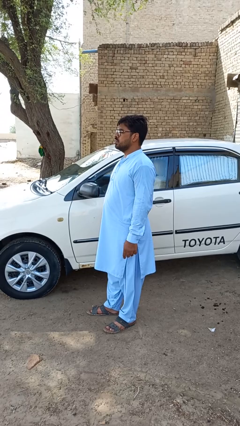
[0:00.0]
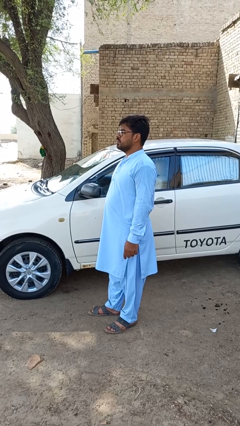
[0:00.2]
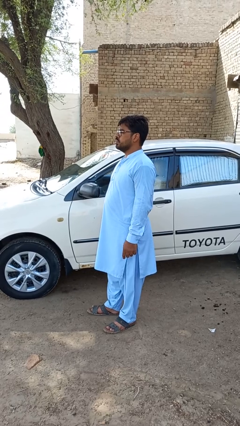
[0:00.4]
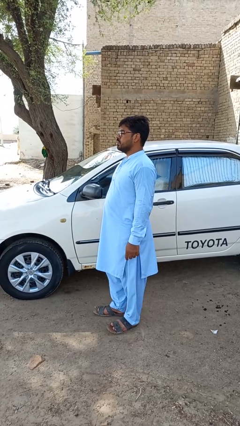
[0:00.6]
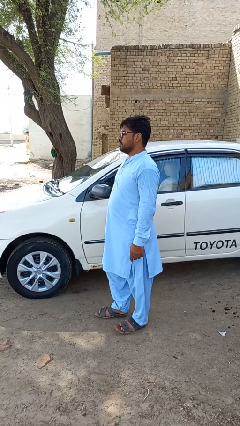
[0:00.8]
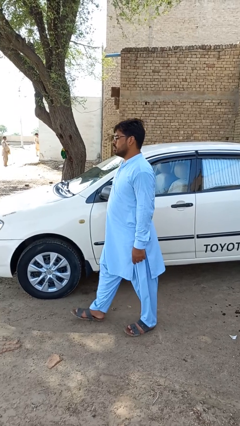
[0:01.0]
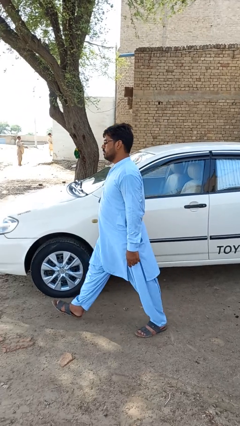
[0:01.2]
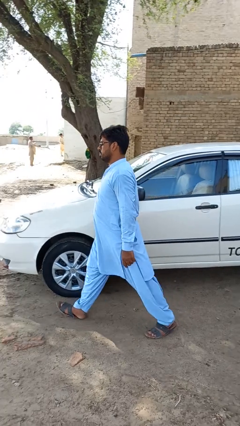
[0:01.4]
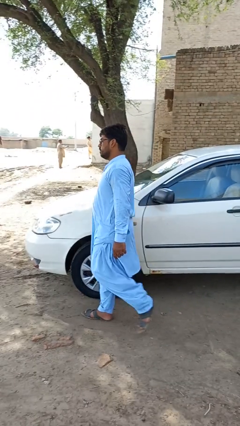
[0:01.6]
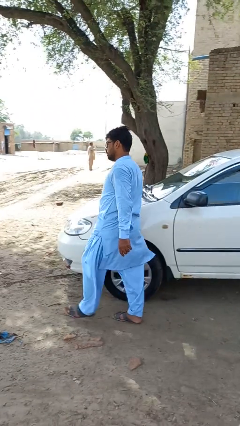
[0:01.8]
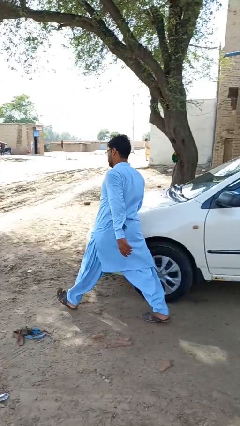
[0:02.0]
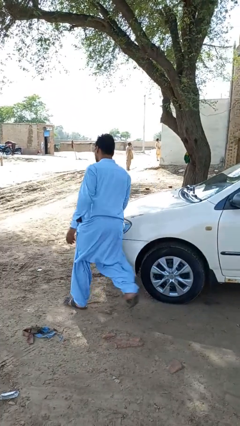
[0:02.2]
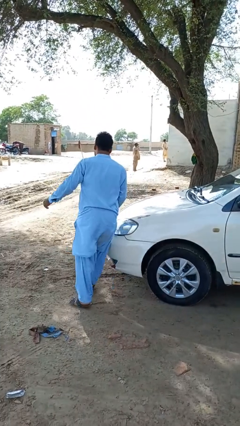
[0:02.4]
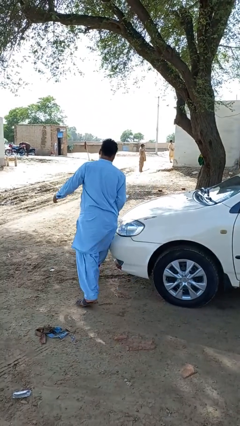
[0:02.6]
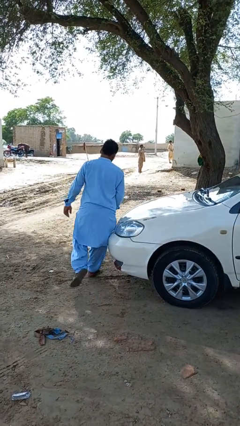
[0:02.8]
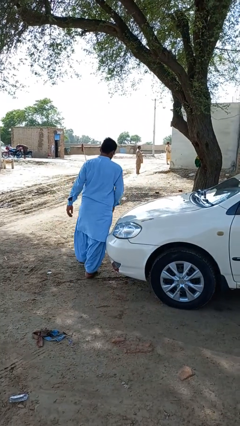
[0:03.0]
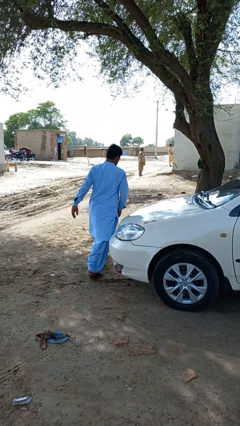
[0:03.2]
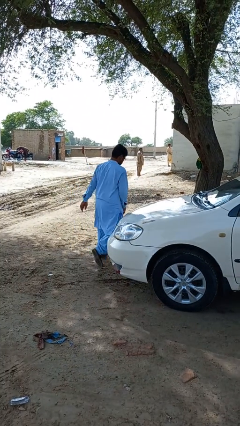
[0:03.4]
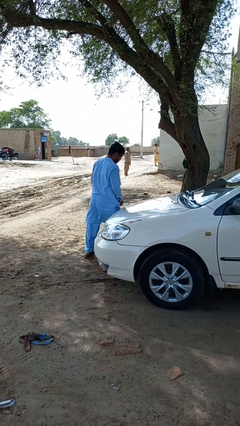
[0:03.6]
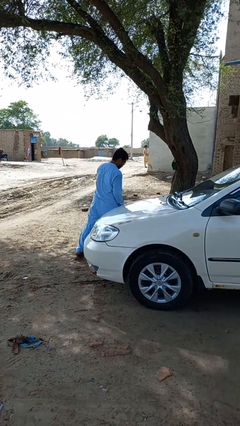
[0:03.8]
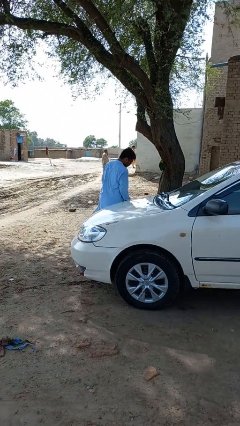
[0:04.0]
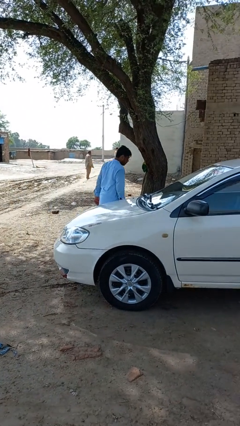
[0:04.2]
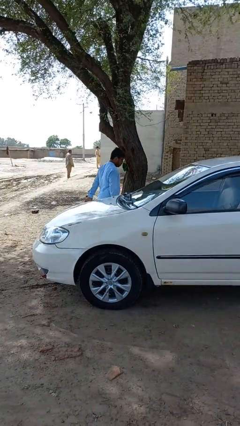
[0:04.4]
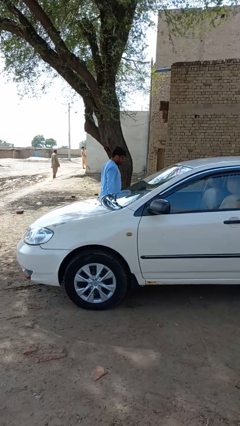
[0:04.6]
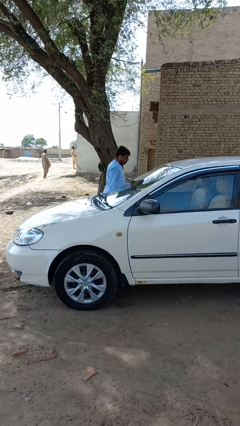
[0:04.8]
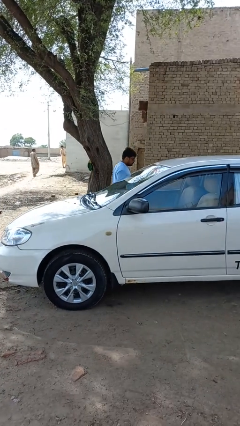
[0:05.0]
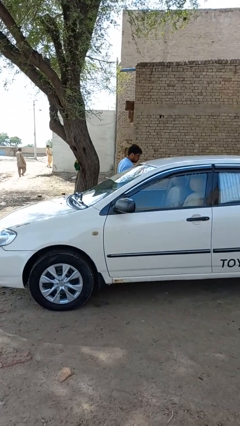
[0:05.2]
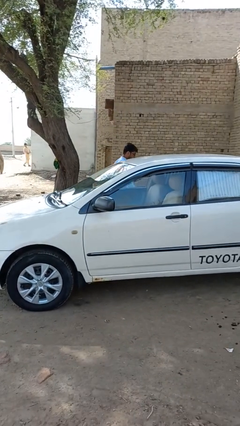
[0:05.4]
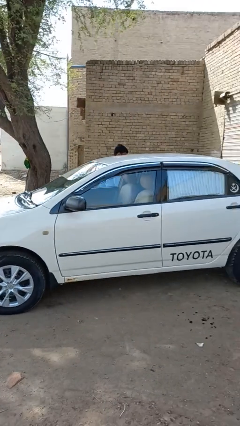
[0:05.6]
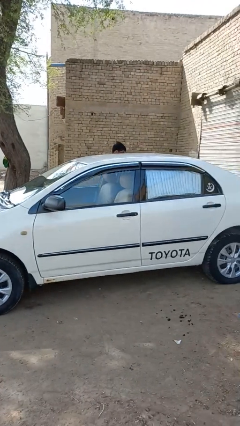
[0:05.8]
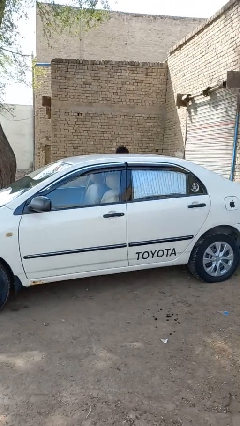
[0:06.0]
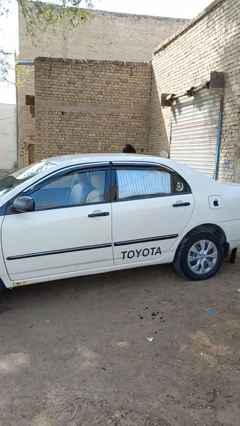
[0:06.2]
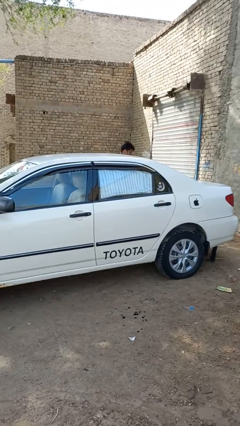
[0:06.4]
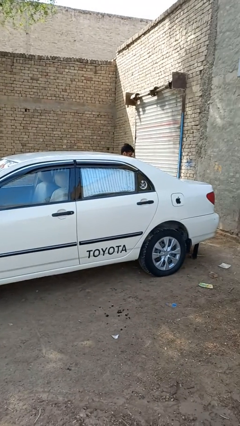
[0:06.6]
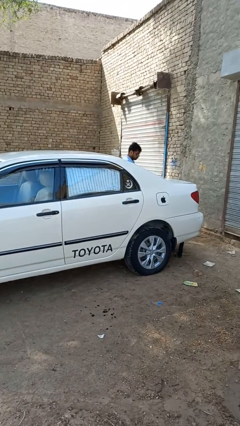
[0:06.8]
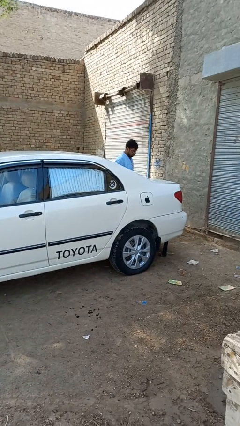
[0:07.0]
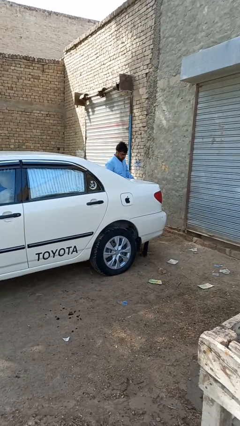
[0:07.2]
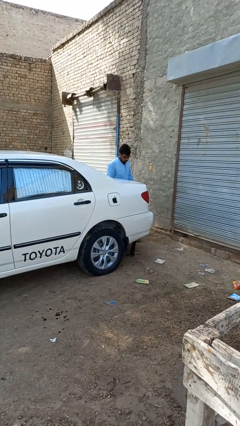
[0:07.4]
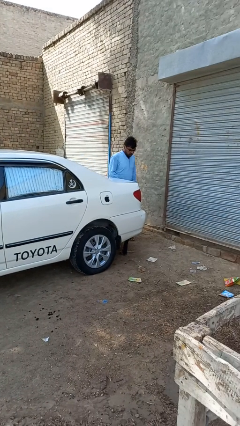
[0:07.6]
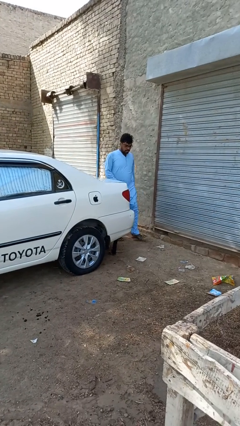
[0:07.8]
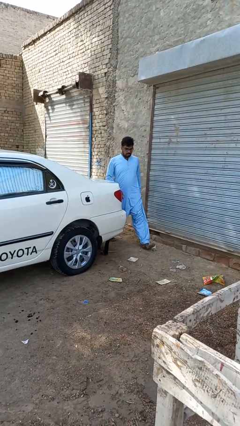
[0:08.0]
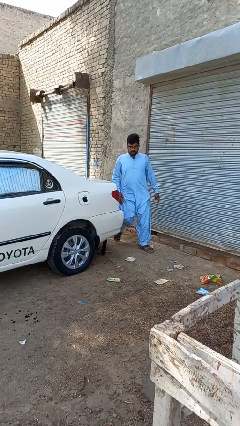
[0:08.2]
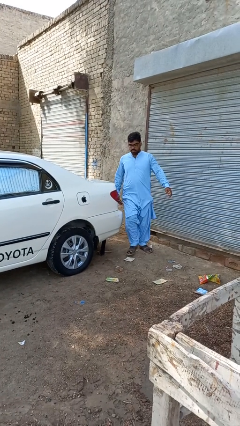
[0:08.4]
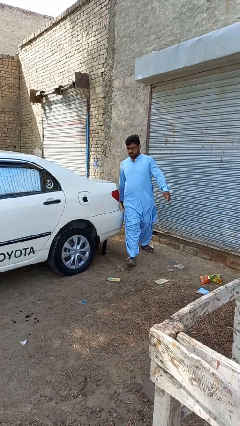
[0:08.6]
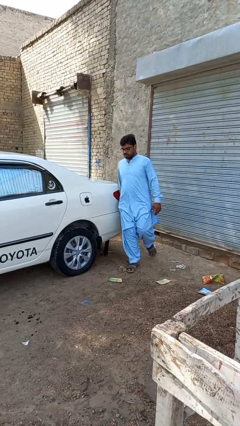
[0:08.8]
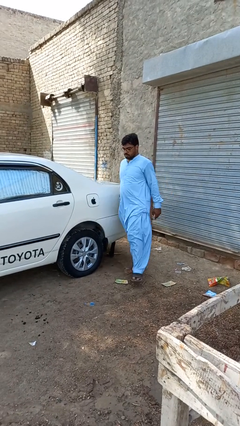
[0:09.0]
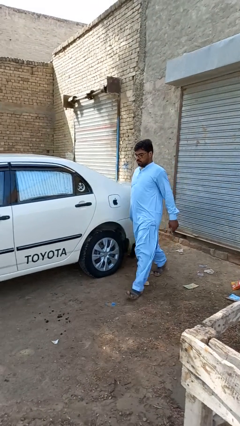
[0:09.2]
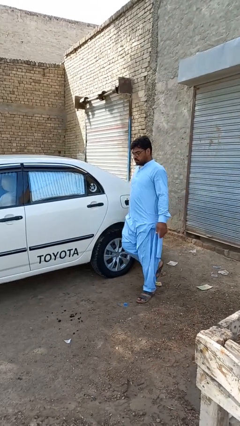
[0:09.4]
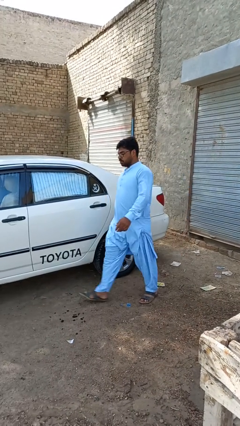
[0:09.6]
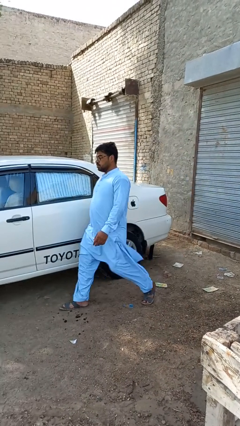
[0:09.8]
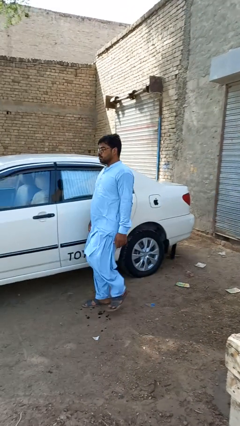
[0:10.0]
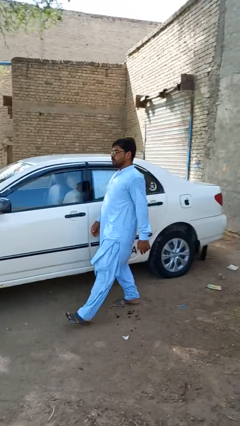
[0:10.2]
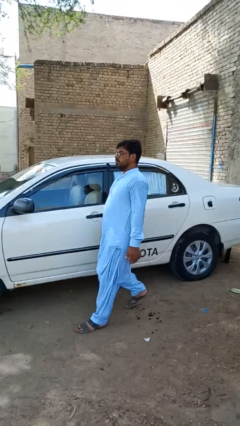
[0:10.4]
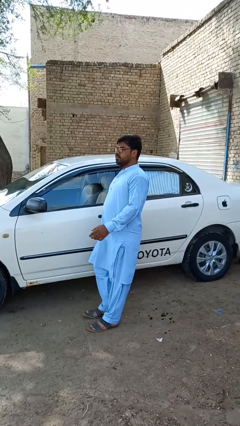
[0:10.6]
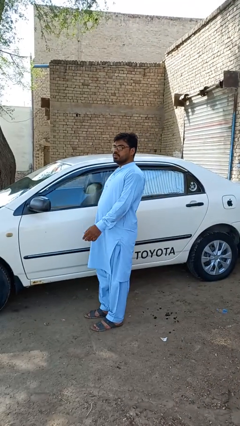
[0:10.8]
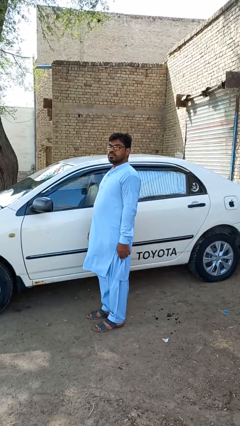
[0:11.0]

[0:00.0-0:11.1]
person walks around car

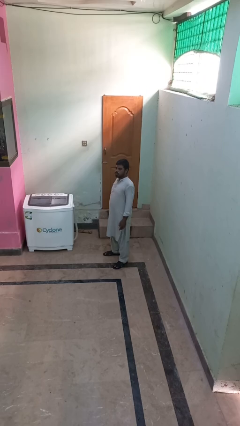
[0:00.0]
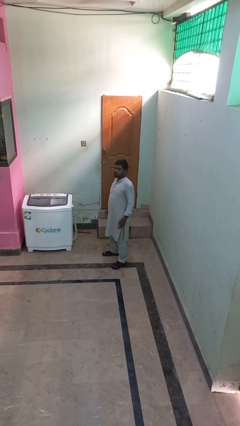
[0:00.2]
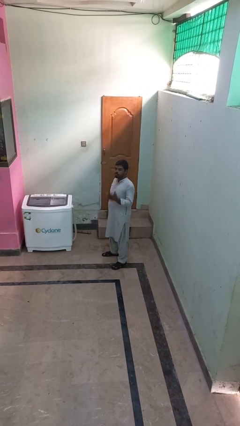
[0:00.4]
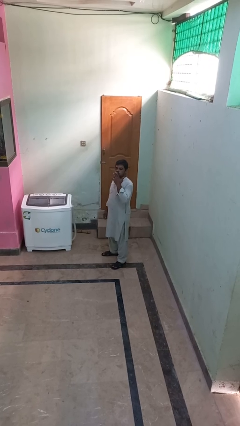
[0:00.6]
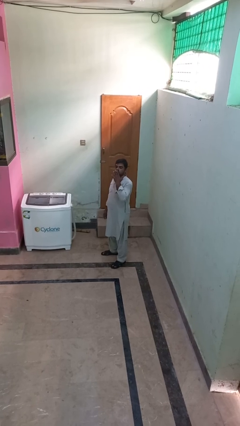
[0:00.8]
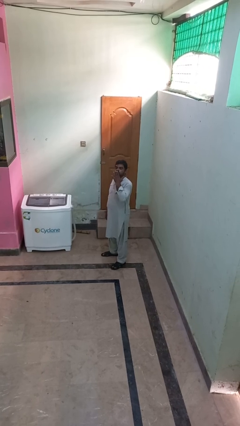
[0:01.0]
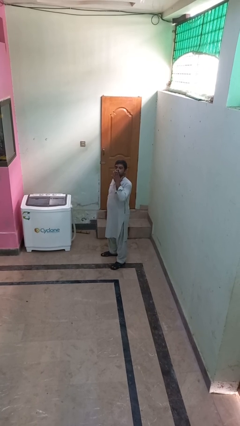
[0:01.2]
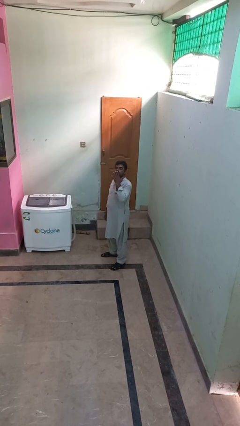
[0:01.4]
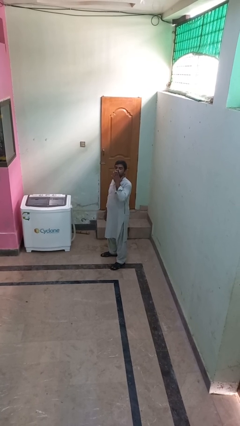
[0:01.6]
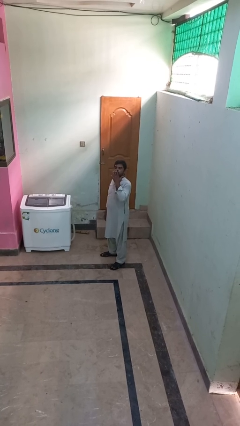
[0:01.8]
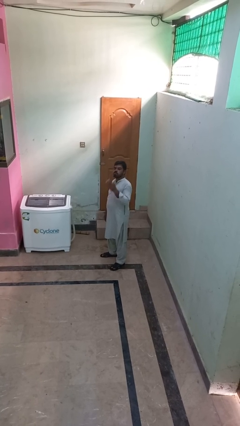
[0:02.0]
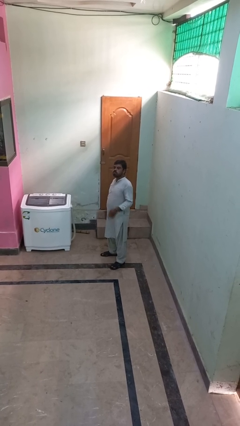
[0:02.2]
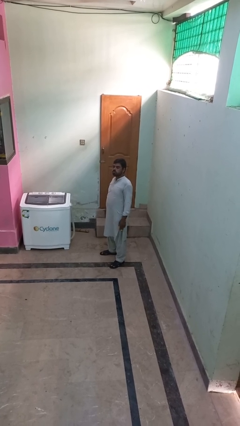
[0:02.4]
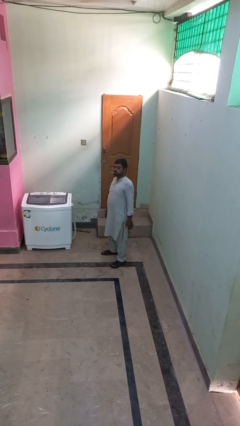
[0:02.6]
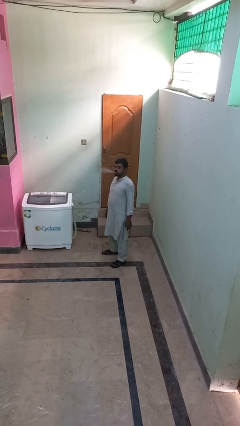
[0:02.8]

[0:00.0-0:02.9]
person vapes

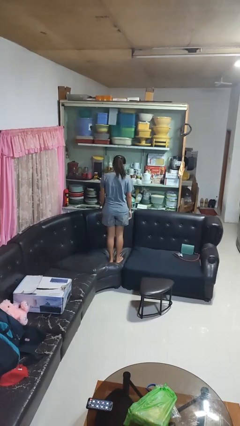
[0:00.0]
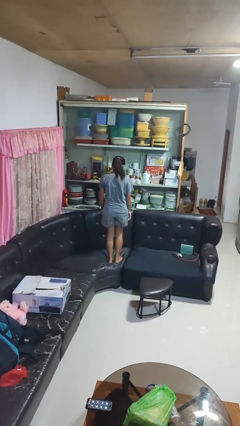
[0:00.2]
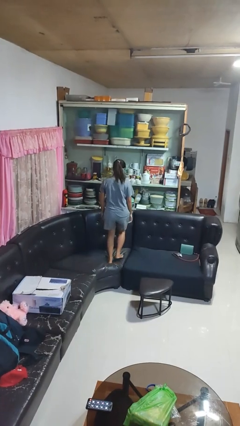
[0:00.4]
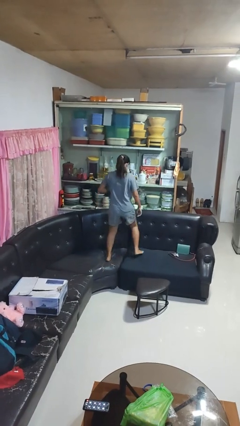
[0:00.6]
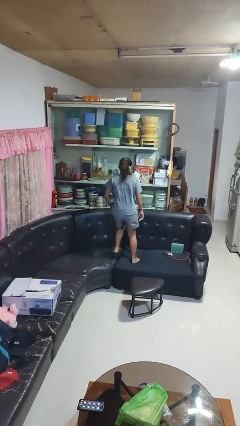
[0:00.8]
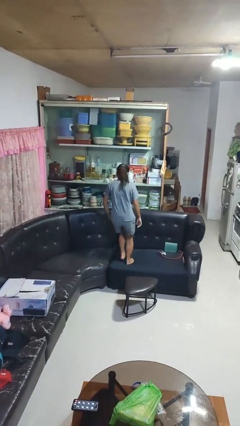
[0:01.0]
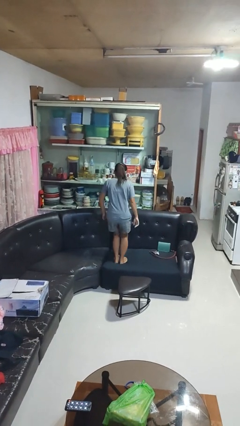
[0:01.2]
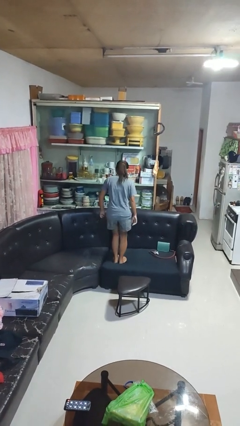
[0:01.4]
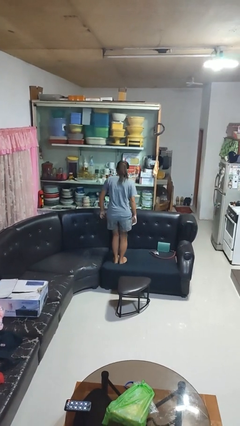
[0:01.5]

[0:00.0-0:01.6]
person jumps on couch

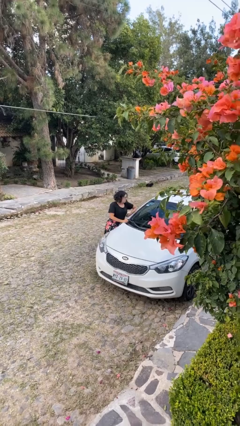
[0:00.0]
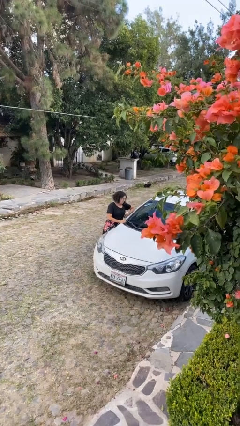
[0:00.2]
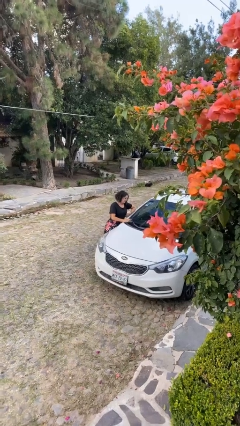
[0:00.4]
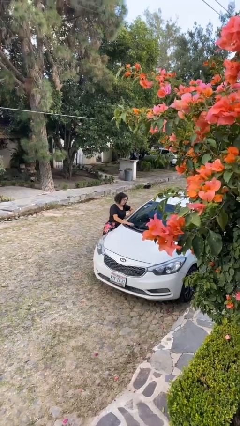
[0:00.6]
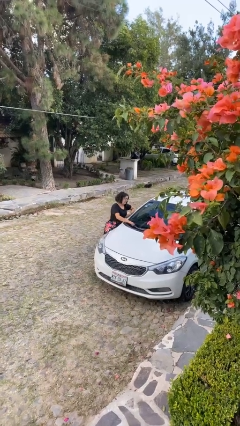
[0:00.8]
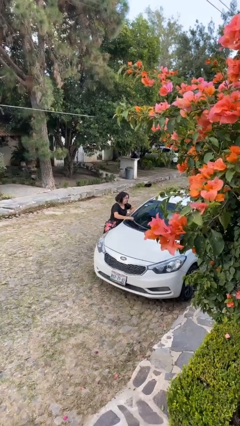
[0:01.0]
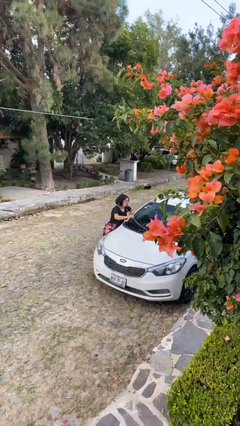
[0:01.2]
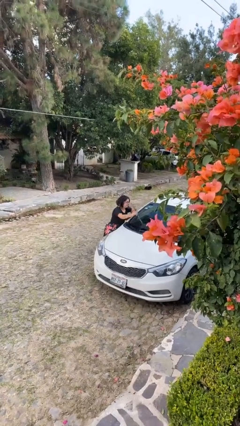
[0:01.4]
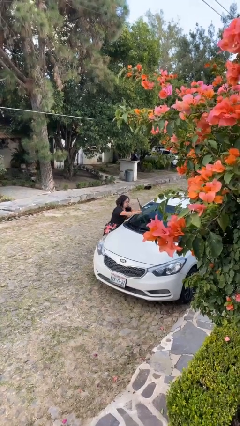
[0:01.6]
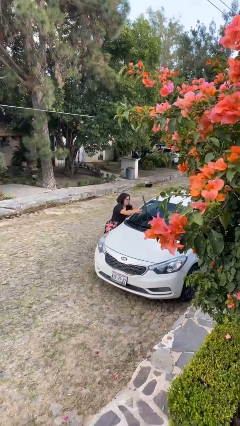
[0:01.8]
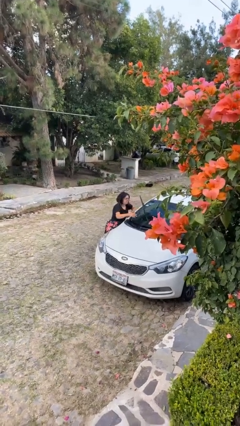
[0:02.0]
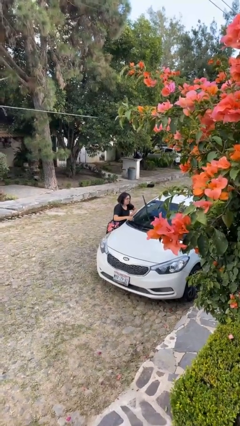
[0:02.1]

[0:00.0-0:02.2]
person flips up car wipers
